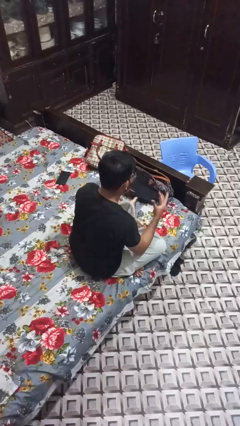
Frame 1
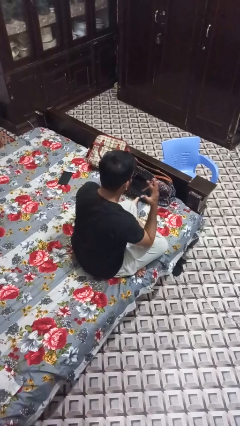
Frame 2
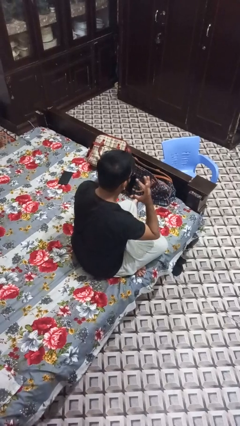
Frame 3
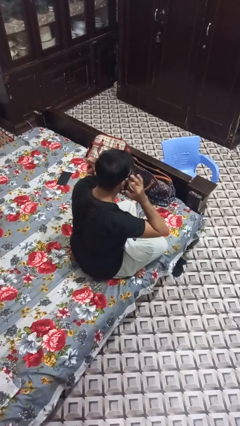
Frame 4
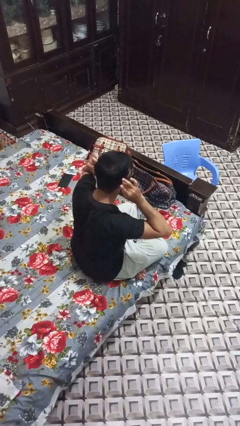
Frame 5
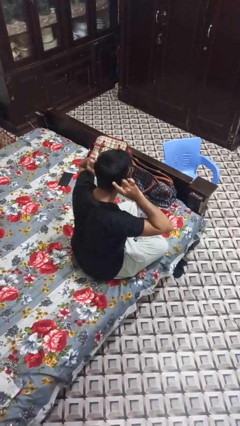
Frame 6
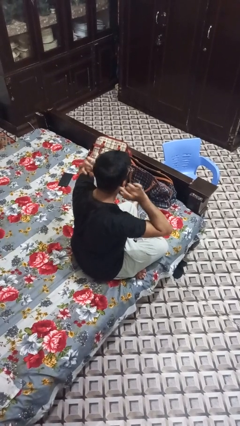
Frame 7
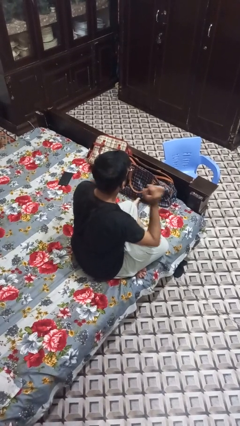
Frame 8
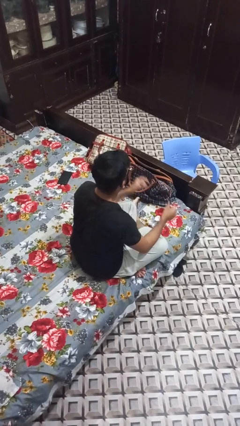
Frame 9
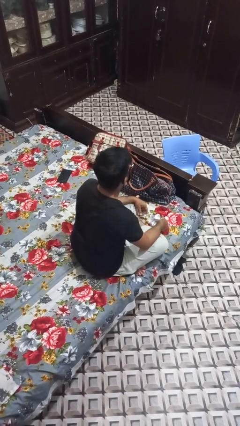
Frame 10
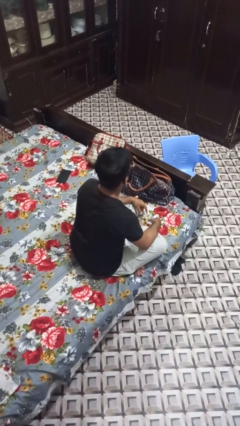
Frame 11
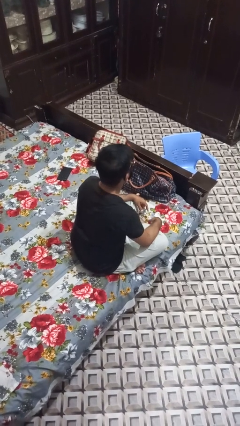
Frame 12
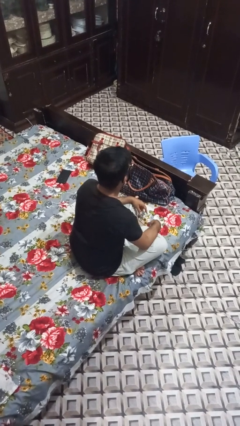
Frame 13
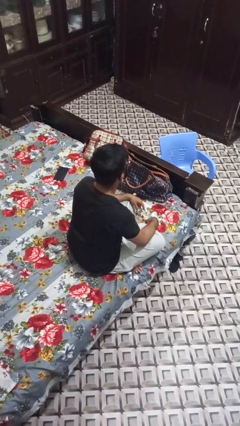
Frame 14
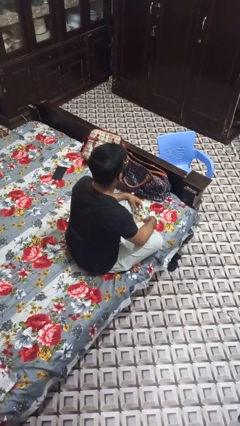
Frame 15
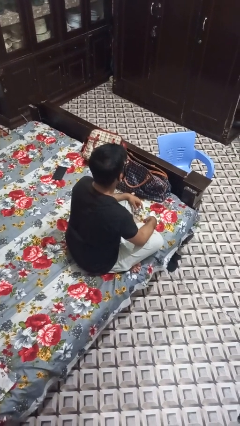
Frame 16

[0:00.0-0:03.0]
person puts on facemask

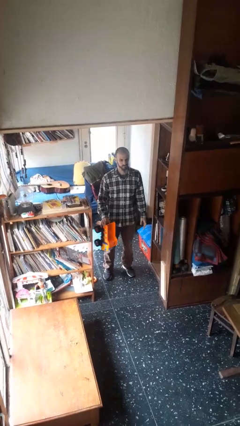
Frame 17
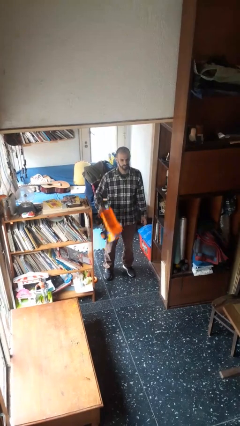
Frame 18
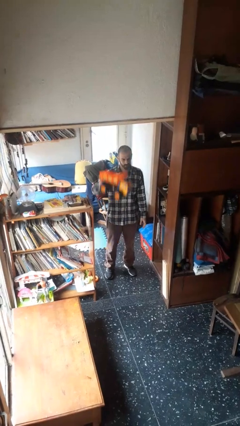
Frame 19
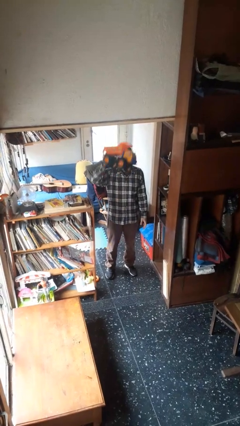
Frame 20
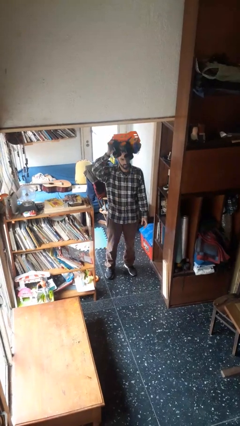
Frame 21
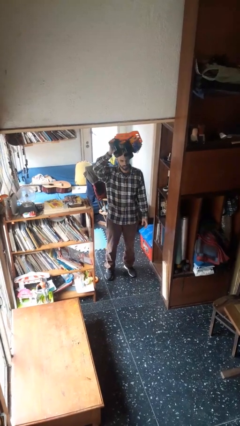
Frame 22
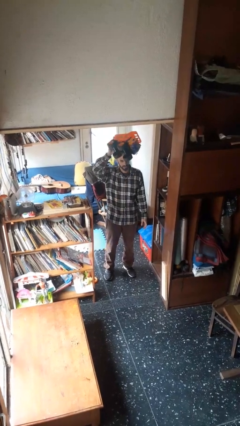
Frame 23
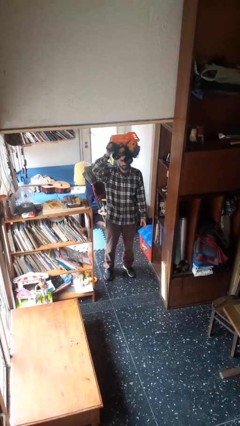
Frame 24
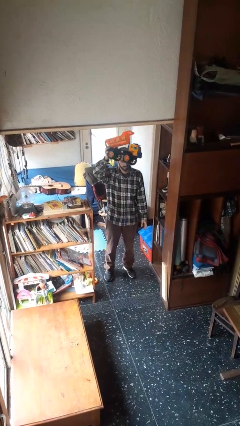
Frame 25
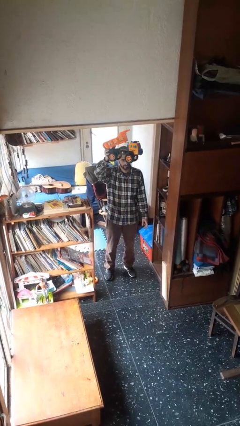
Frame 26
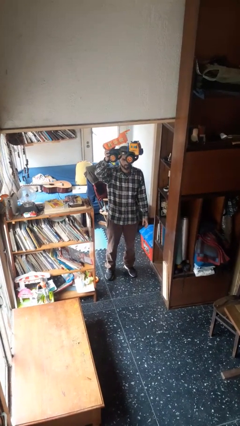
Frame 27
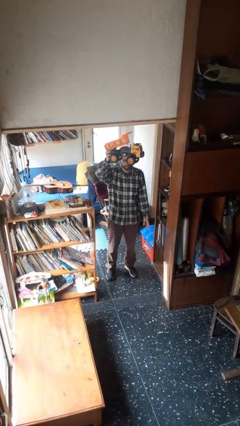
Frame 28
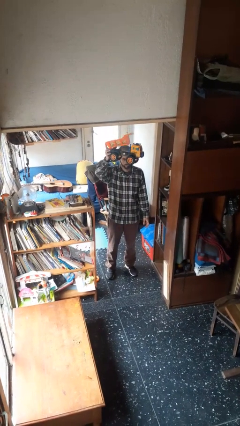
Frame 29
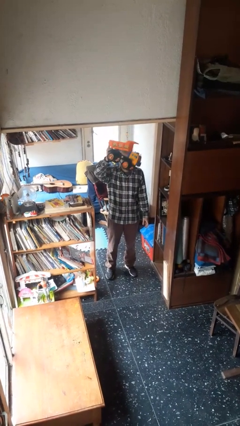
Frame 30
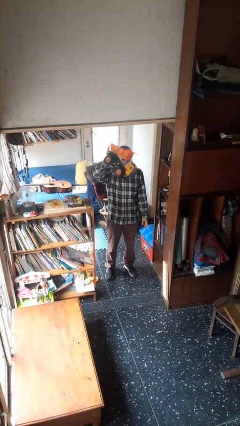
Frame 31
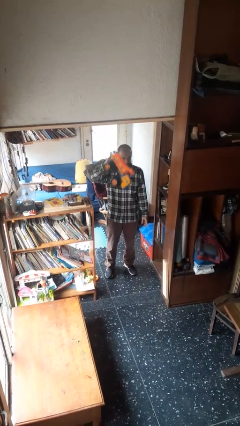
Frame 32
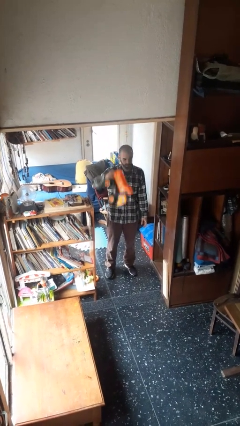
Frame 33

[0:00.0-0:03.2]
person holds object above head

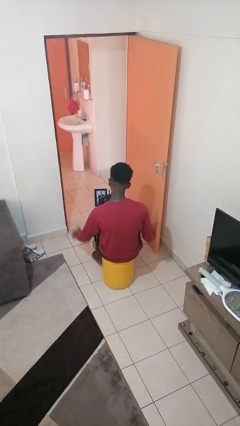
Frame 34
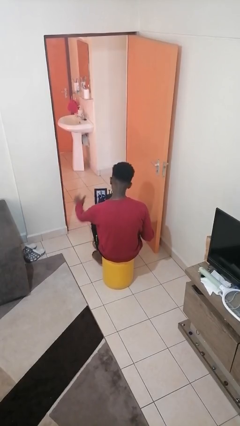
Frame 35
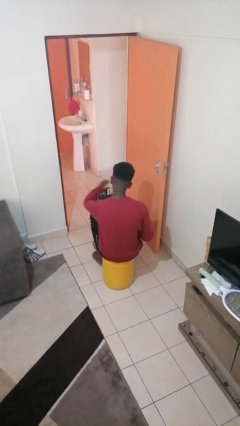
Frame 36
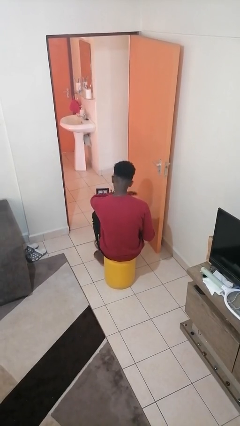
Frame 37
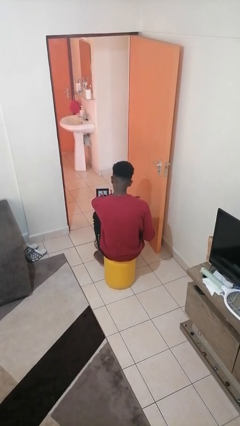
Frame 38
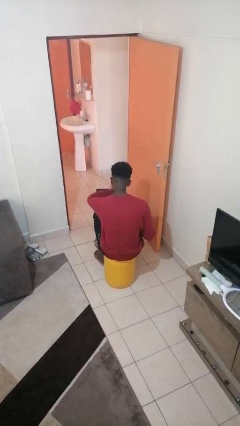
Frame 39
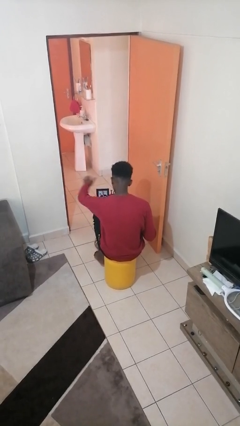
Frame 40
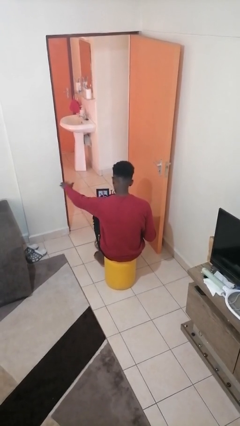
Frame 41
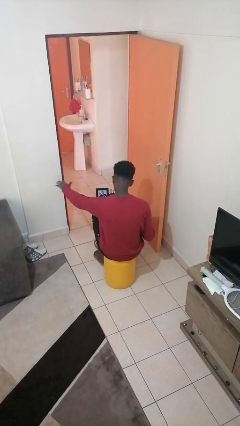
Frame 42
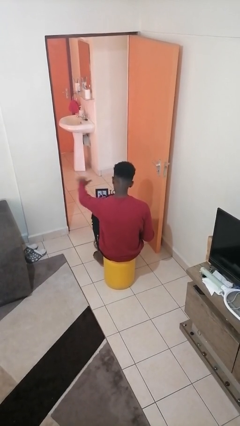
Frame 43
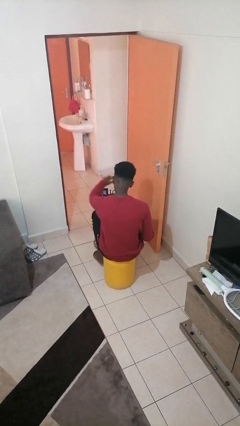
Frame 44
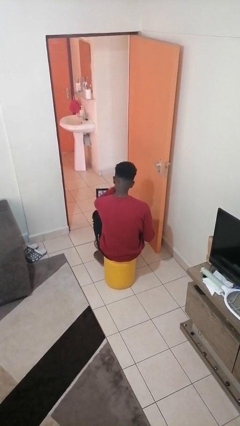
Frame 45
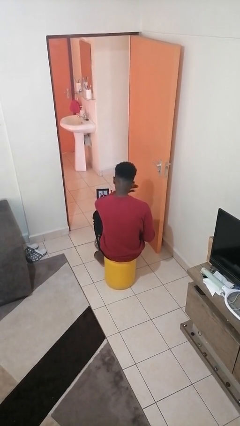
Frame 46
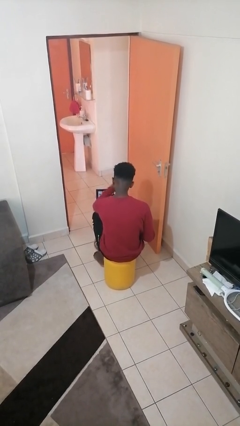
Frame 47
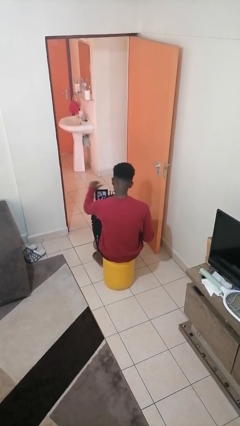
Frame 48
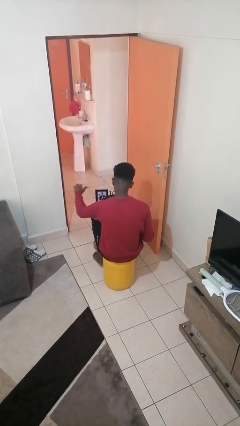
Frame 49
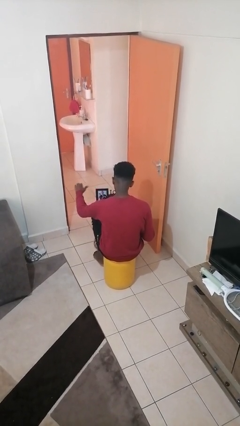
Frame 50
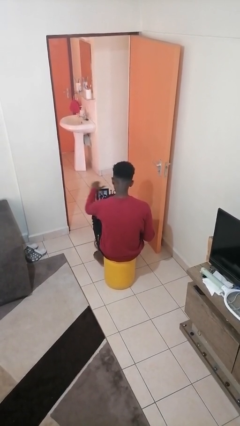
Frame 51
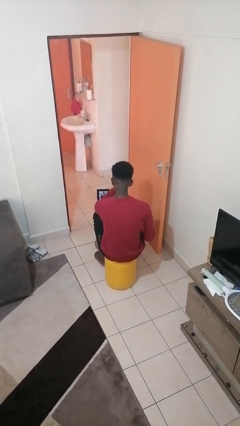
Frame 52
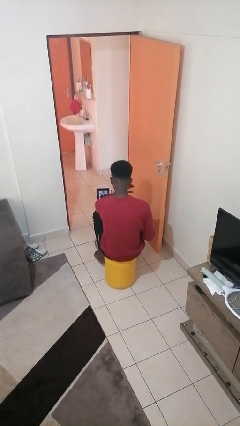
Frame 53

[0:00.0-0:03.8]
person waves hand over object

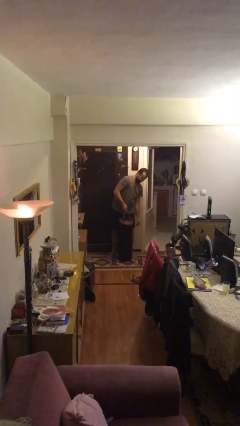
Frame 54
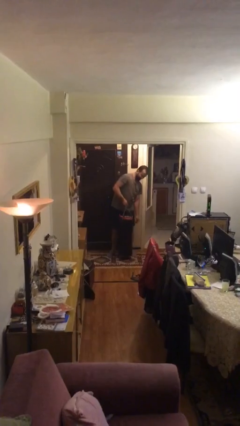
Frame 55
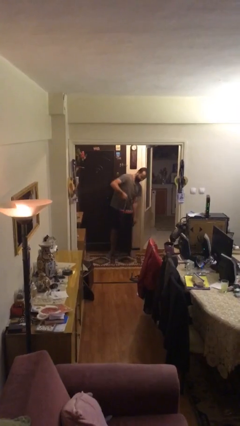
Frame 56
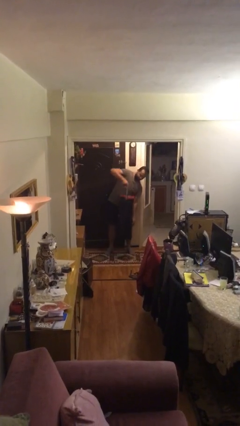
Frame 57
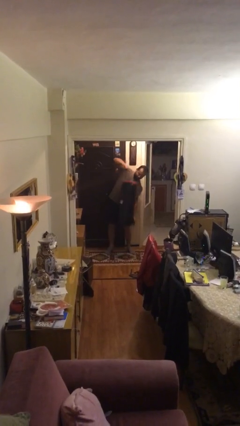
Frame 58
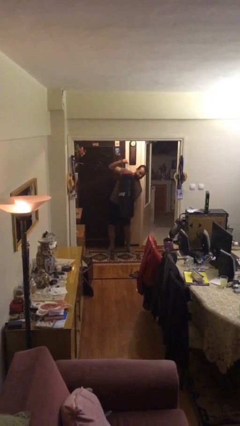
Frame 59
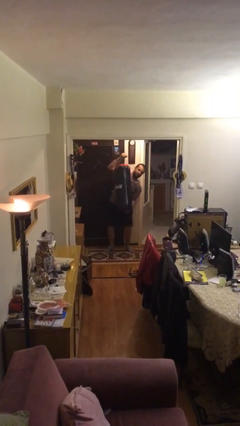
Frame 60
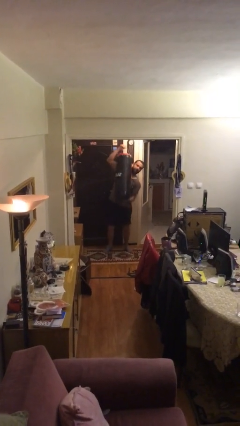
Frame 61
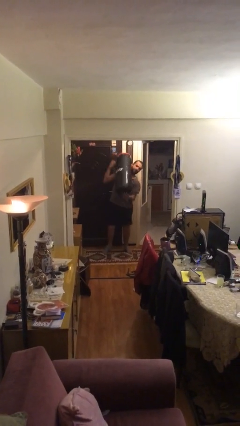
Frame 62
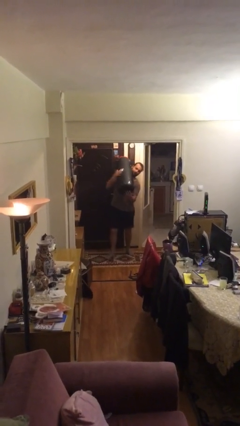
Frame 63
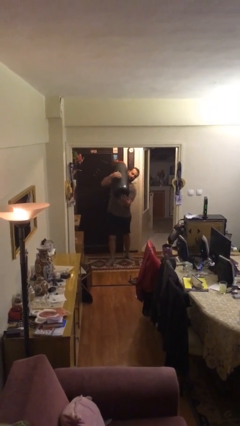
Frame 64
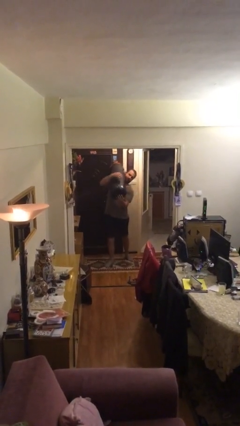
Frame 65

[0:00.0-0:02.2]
person picks up object from floor

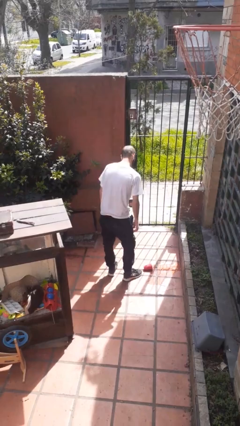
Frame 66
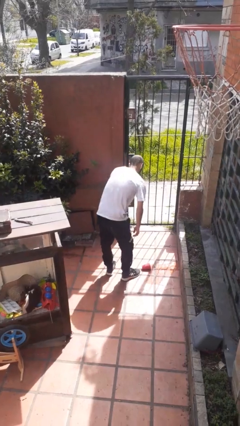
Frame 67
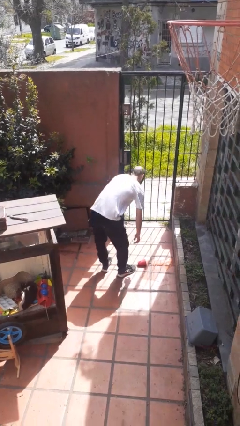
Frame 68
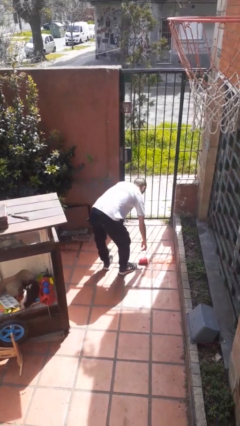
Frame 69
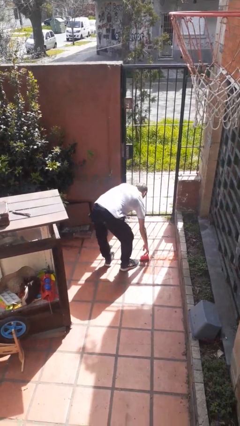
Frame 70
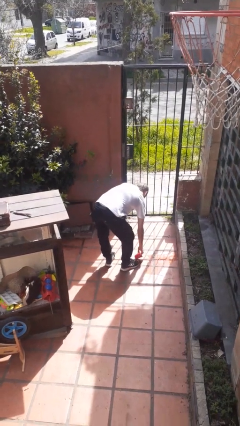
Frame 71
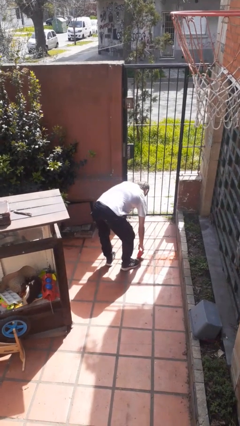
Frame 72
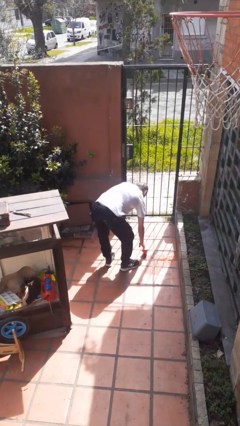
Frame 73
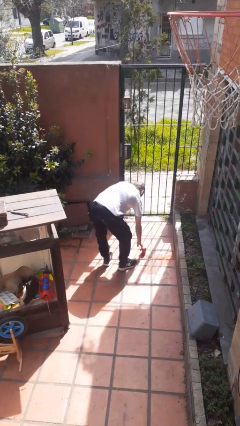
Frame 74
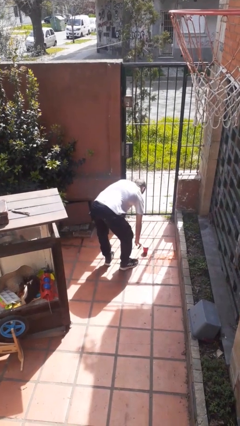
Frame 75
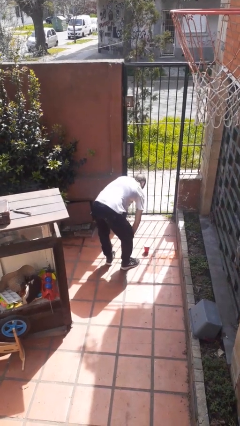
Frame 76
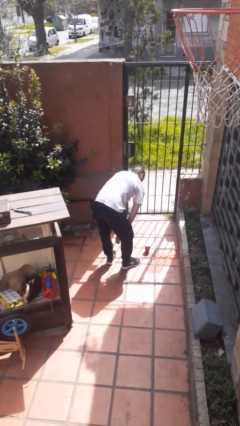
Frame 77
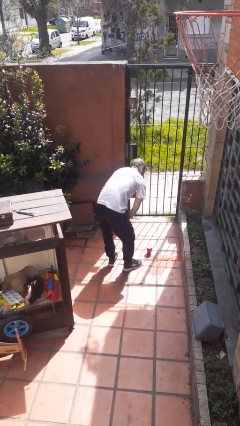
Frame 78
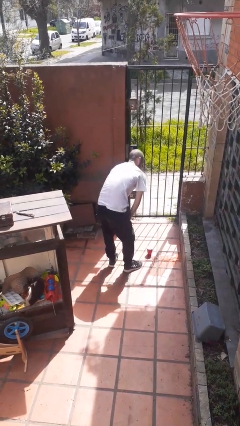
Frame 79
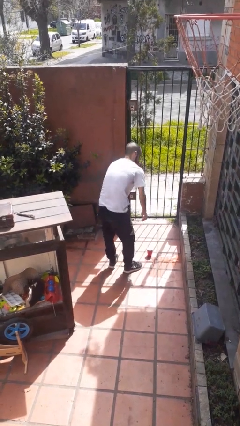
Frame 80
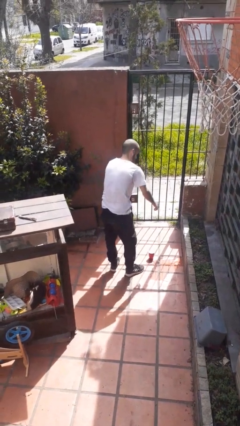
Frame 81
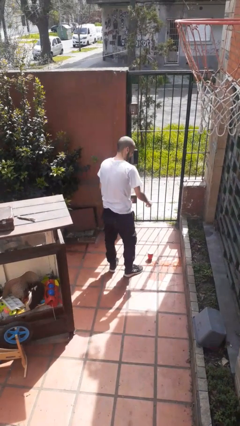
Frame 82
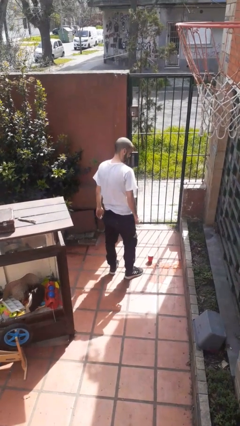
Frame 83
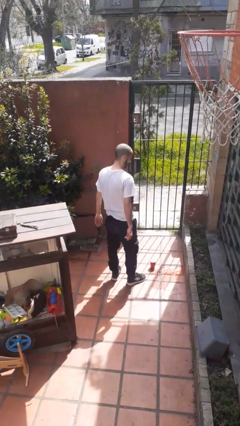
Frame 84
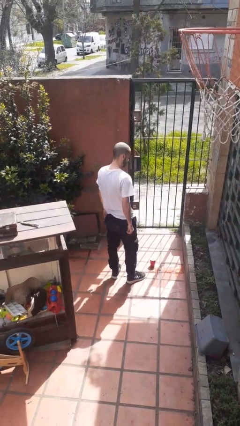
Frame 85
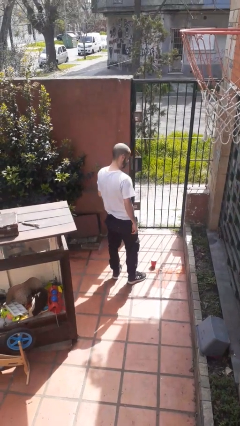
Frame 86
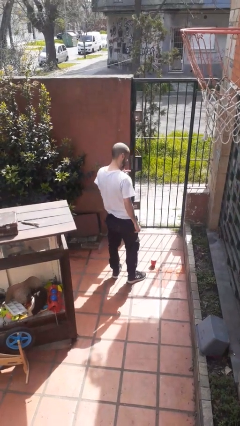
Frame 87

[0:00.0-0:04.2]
person sets upright glass

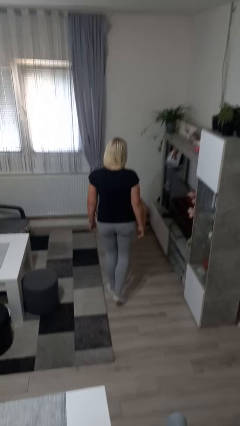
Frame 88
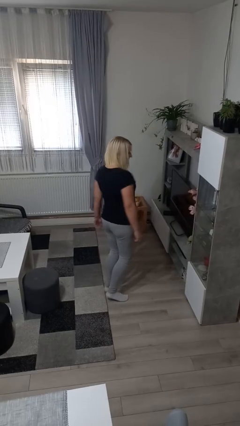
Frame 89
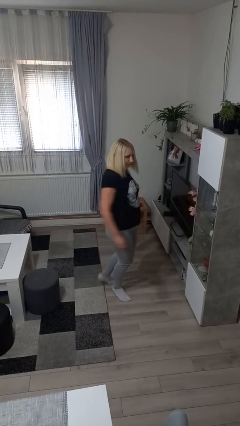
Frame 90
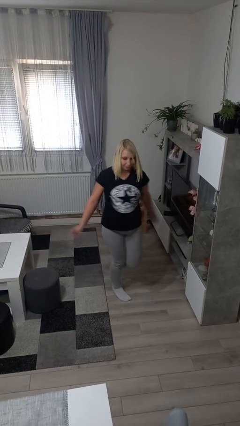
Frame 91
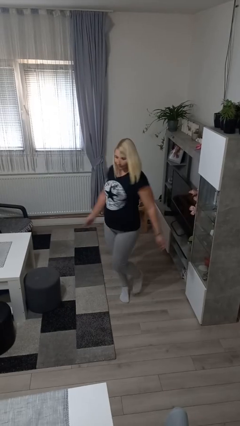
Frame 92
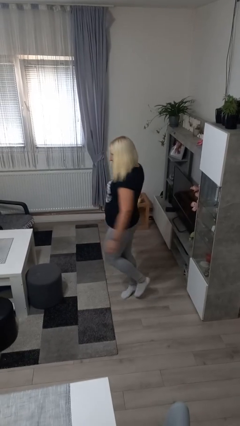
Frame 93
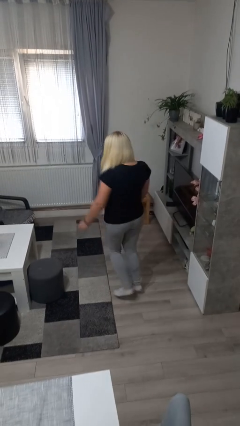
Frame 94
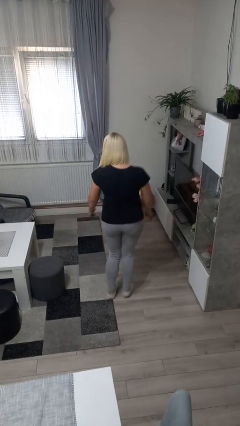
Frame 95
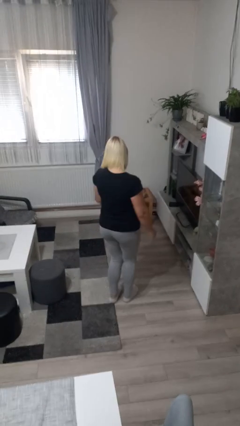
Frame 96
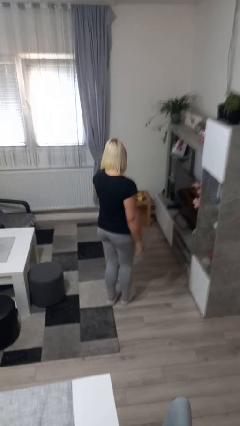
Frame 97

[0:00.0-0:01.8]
person twirls
